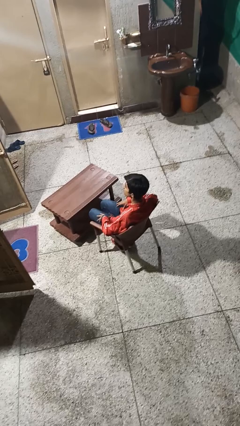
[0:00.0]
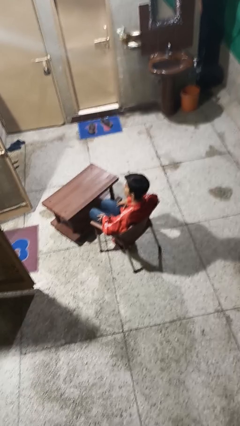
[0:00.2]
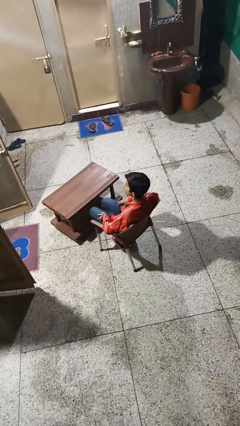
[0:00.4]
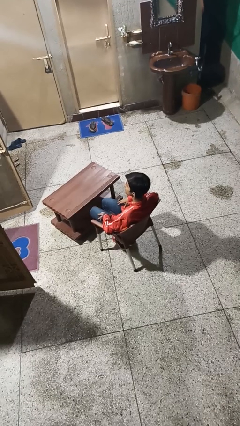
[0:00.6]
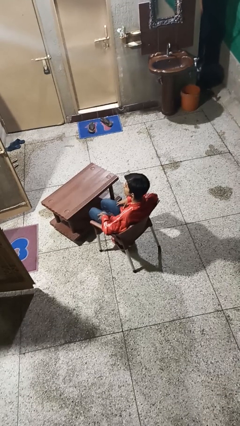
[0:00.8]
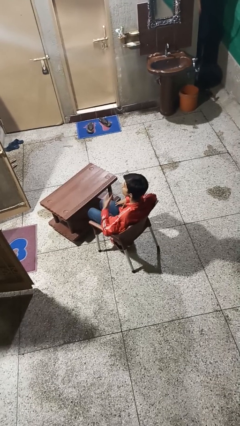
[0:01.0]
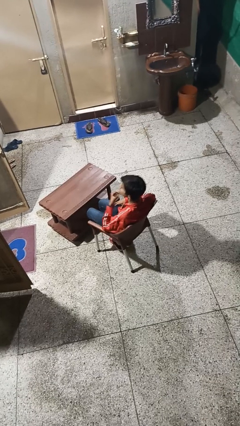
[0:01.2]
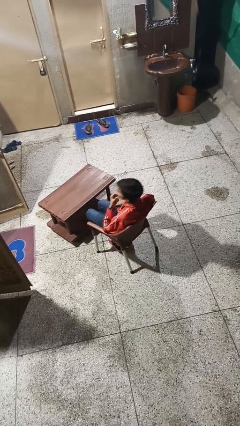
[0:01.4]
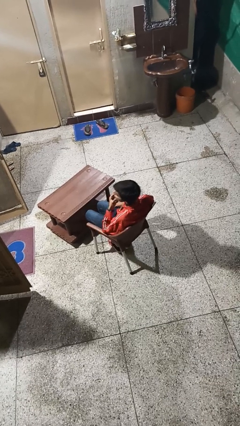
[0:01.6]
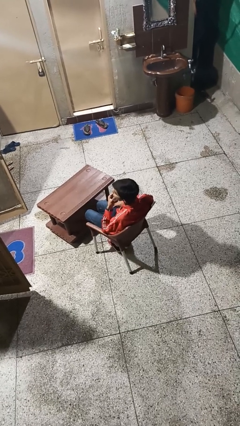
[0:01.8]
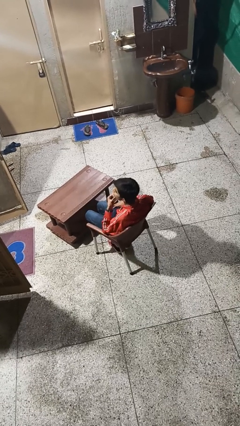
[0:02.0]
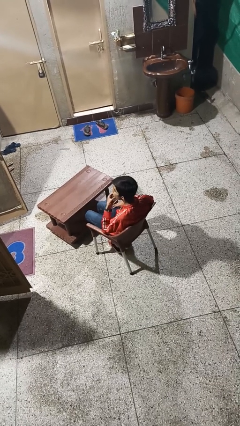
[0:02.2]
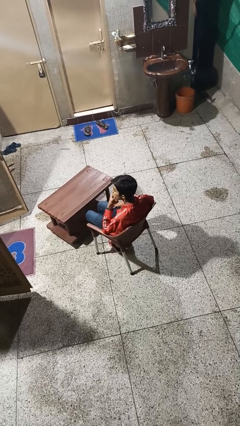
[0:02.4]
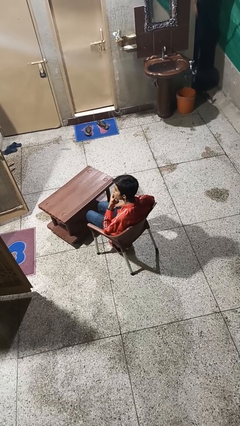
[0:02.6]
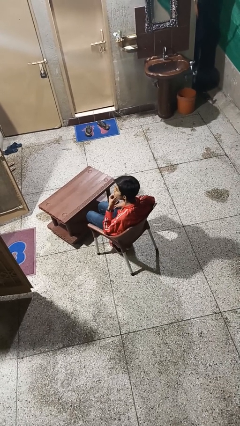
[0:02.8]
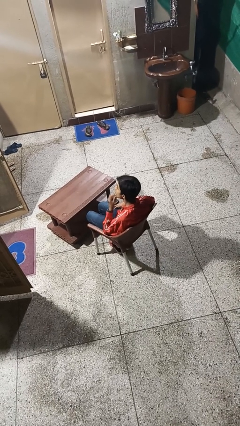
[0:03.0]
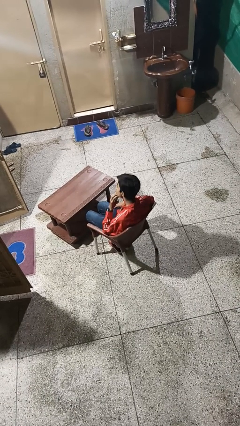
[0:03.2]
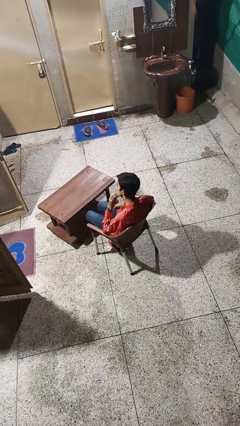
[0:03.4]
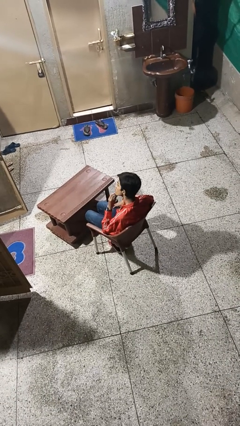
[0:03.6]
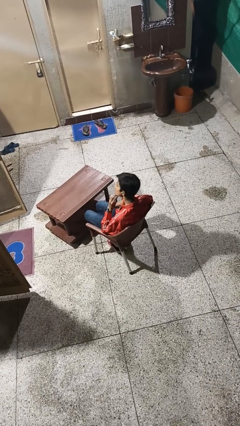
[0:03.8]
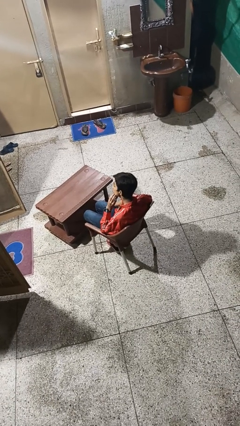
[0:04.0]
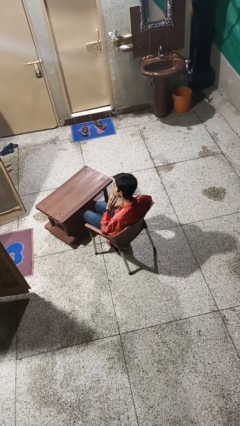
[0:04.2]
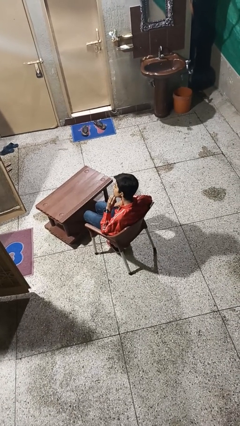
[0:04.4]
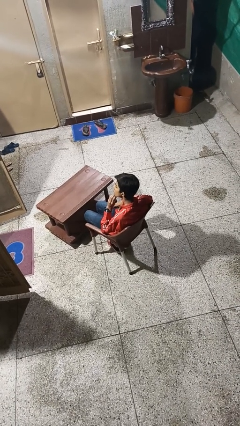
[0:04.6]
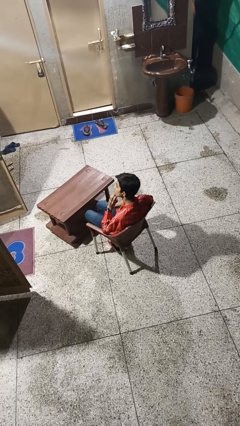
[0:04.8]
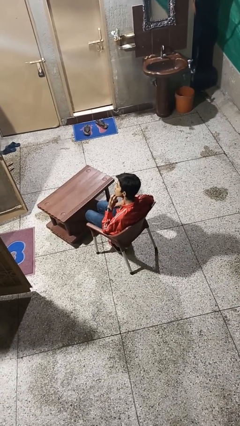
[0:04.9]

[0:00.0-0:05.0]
person strokes chin

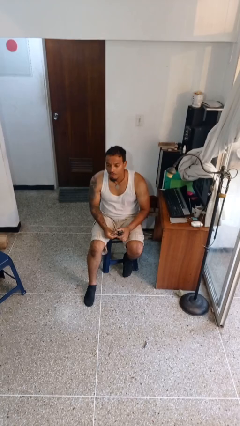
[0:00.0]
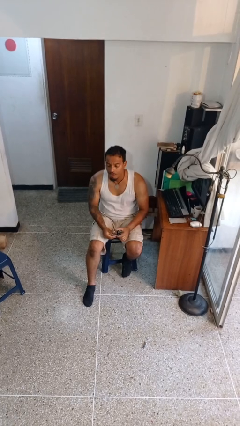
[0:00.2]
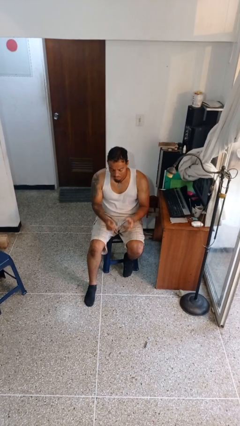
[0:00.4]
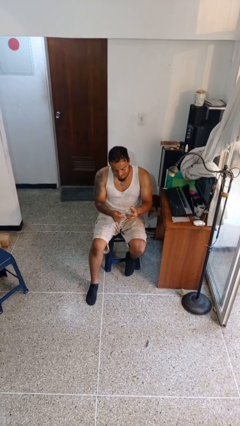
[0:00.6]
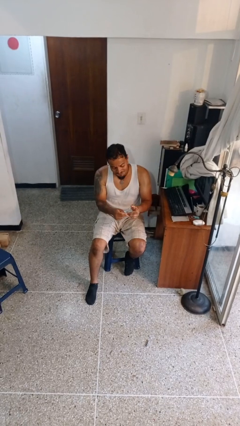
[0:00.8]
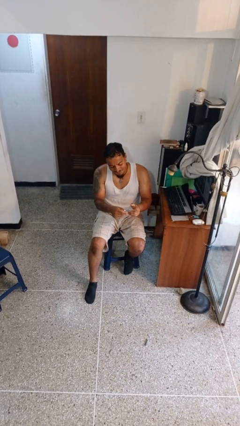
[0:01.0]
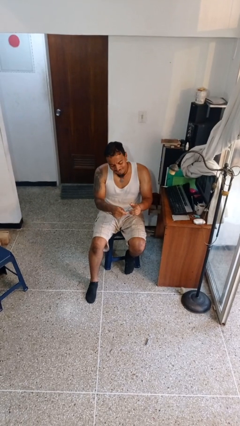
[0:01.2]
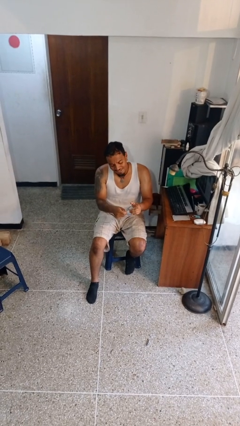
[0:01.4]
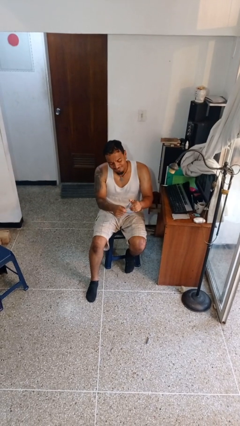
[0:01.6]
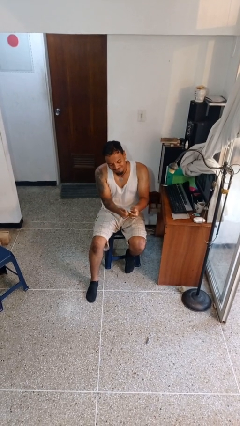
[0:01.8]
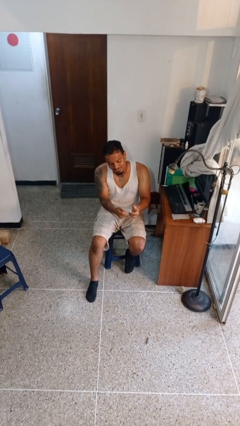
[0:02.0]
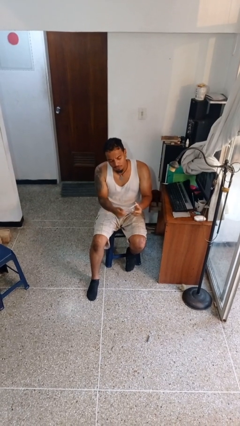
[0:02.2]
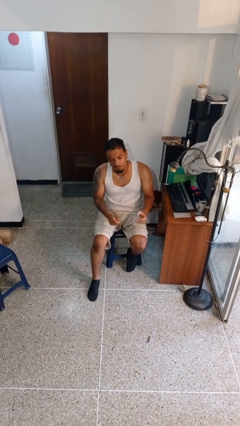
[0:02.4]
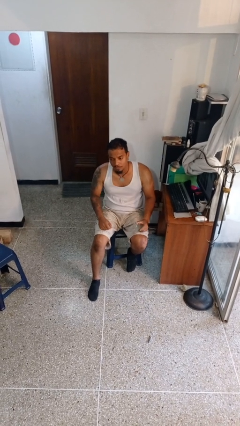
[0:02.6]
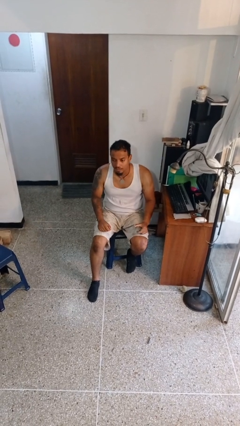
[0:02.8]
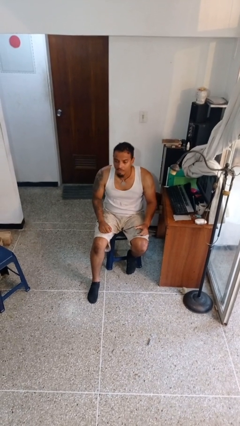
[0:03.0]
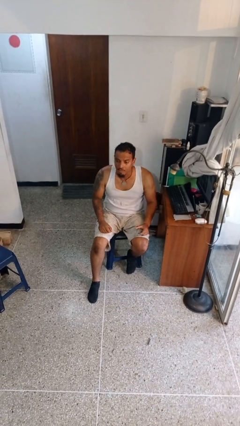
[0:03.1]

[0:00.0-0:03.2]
person clips fingernails

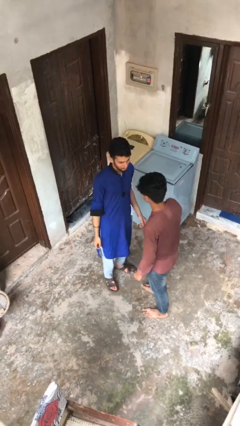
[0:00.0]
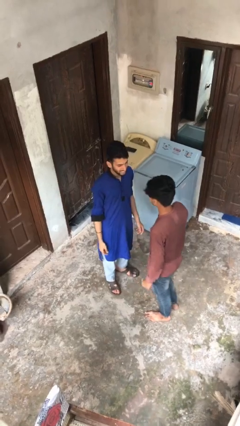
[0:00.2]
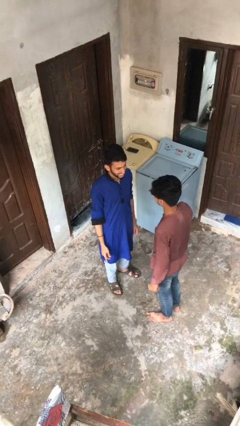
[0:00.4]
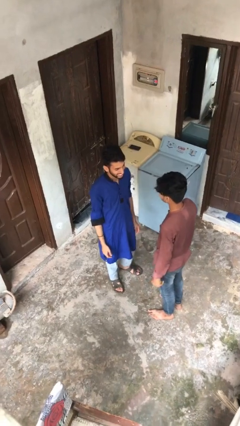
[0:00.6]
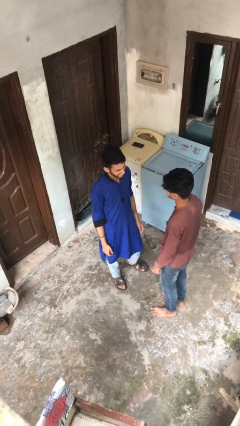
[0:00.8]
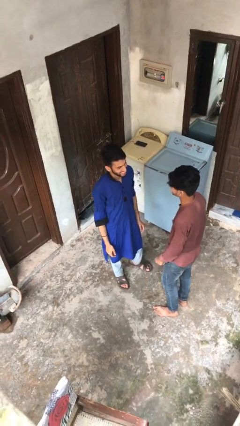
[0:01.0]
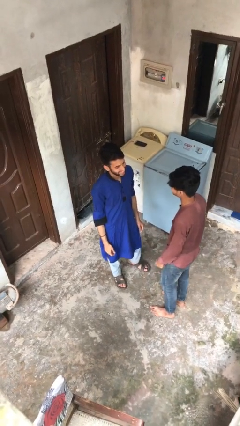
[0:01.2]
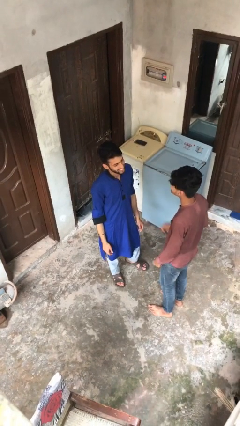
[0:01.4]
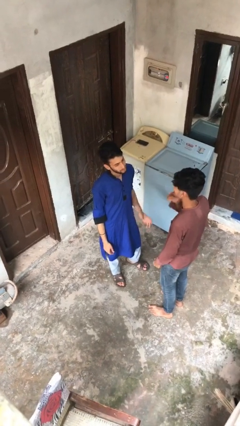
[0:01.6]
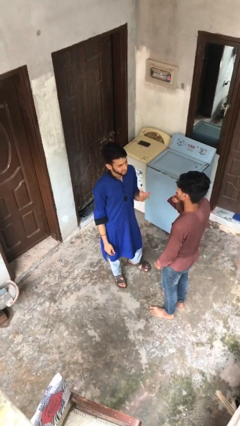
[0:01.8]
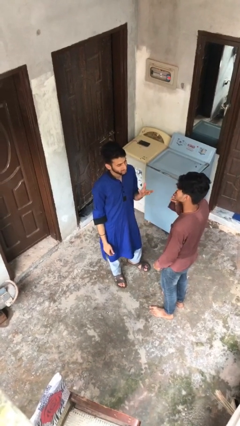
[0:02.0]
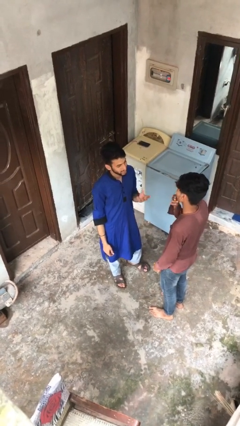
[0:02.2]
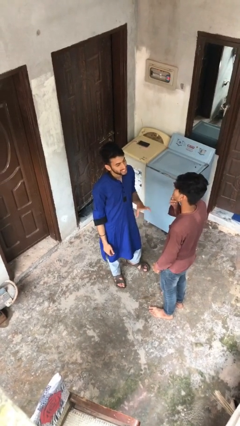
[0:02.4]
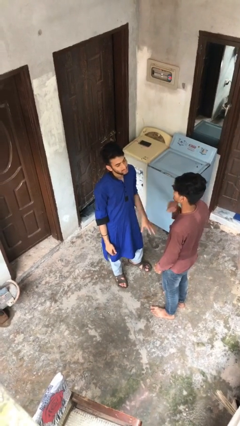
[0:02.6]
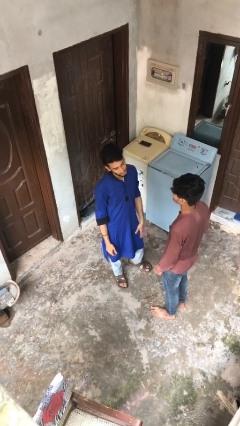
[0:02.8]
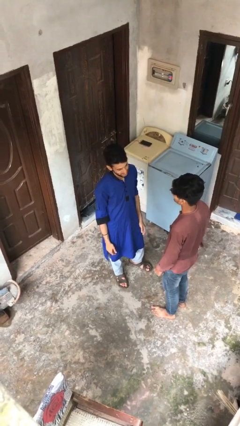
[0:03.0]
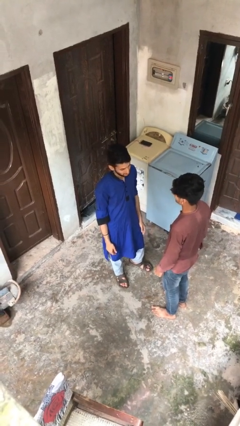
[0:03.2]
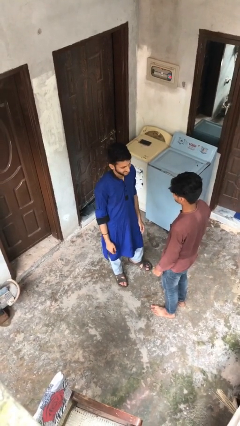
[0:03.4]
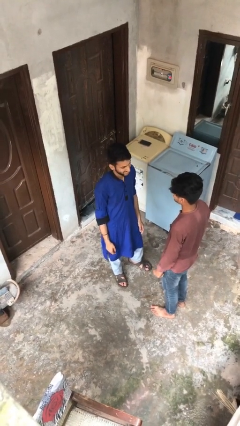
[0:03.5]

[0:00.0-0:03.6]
person talks to person

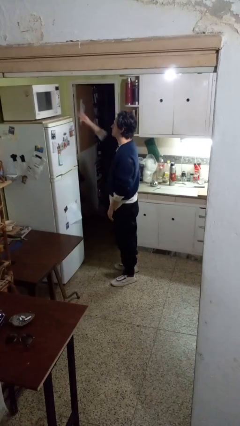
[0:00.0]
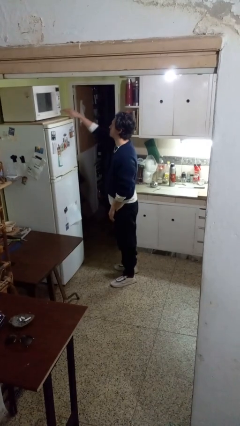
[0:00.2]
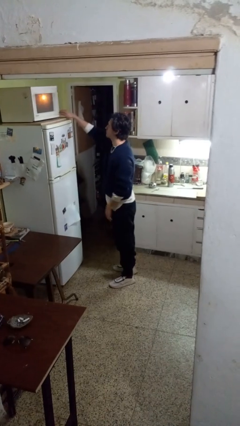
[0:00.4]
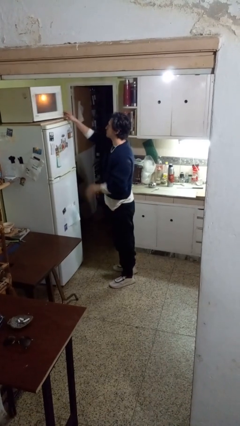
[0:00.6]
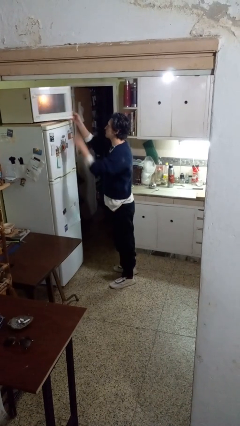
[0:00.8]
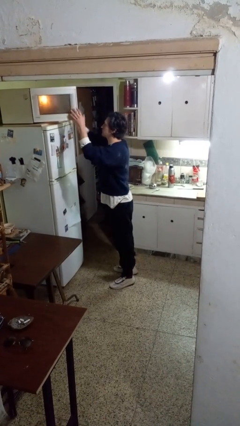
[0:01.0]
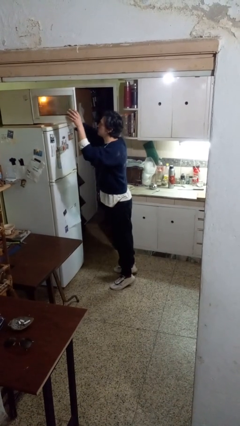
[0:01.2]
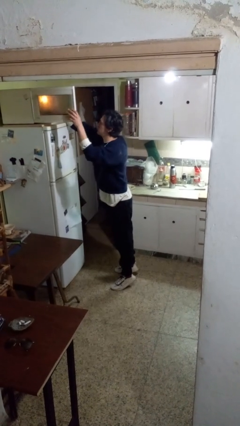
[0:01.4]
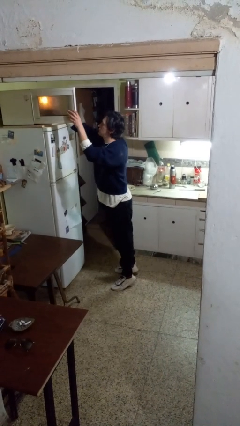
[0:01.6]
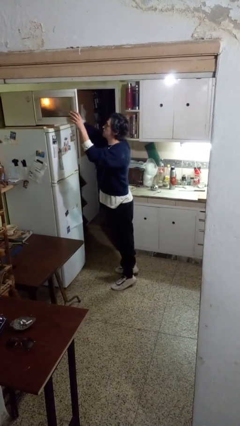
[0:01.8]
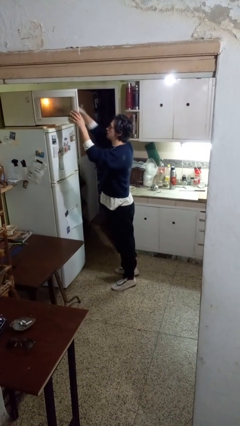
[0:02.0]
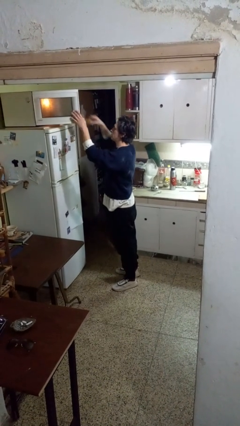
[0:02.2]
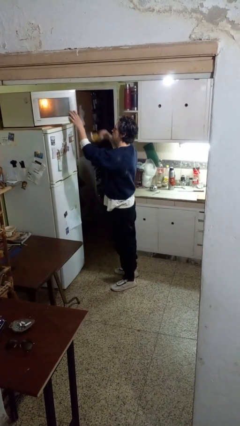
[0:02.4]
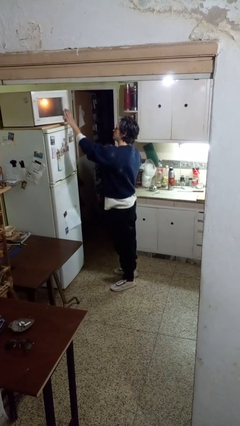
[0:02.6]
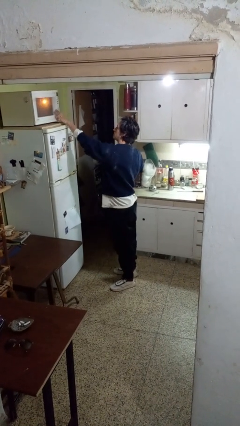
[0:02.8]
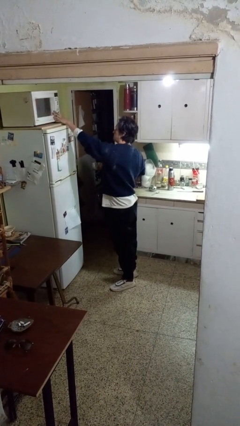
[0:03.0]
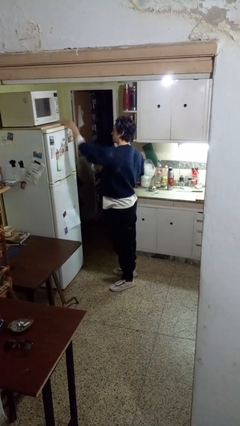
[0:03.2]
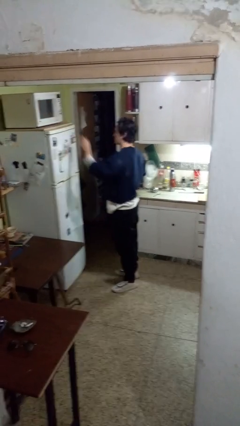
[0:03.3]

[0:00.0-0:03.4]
person takes object from microwave

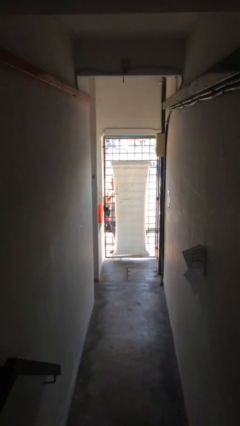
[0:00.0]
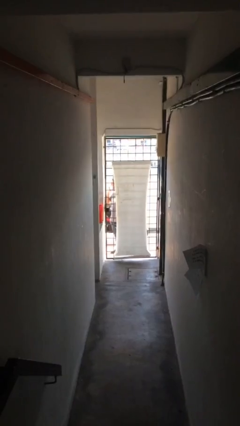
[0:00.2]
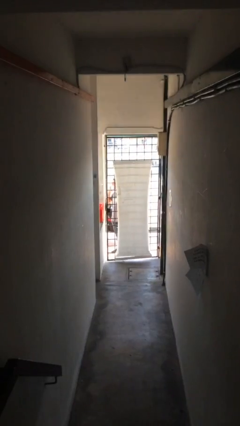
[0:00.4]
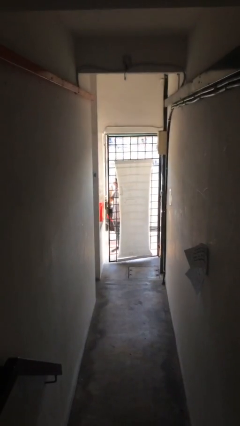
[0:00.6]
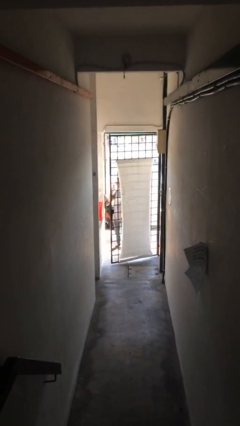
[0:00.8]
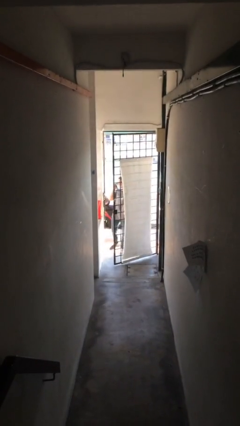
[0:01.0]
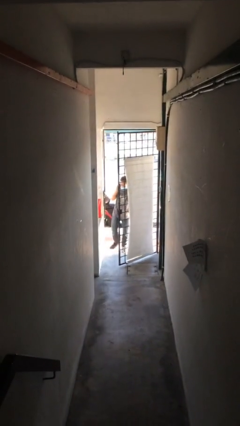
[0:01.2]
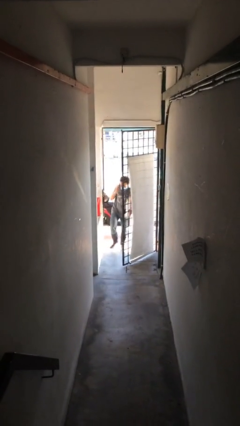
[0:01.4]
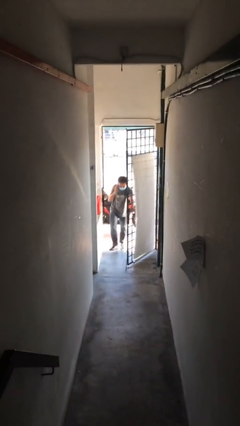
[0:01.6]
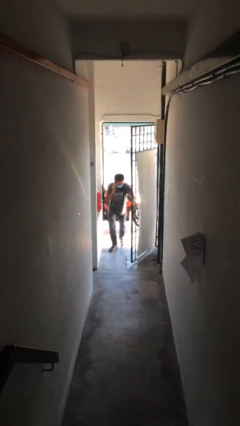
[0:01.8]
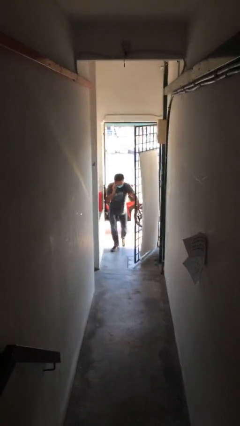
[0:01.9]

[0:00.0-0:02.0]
person opens facility door

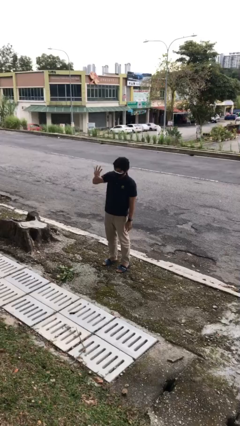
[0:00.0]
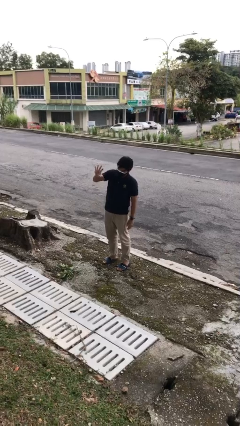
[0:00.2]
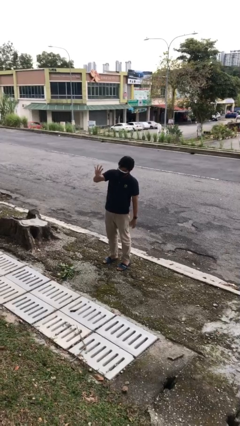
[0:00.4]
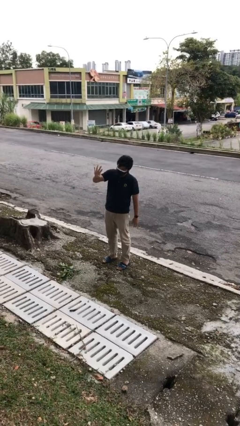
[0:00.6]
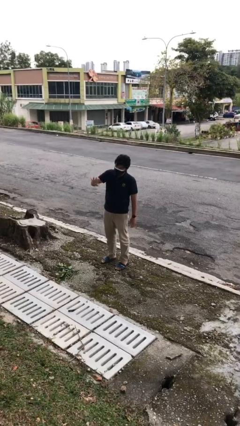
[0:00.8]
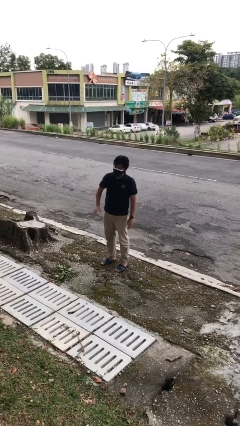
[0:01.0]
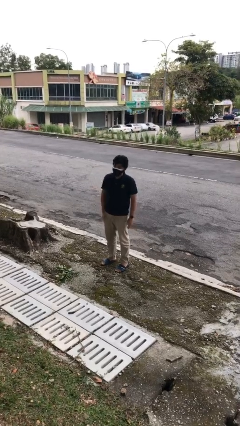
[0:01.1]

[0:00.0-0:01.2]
person gestures number four
